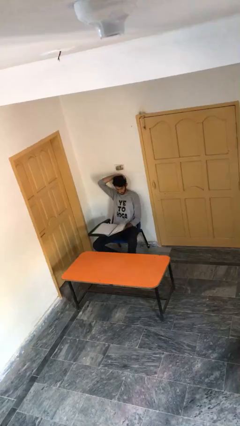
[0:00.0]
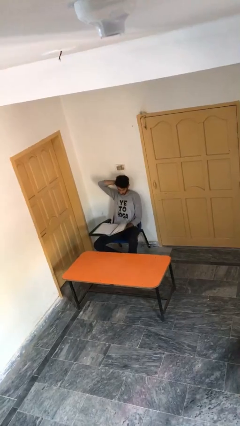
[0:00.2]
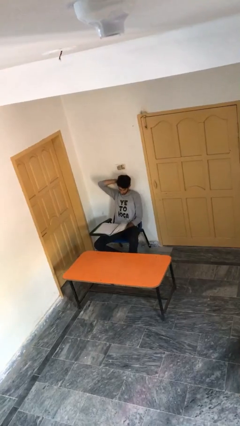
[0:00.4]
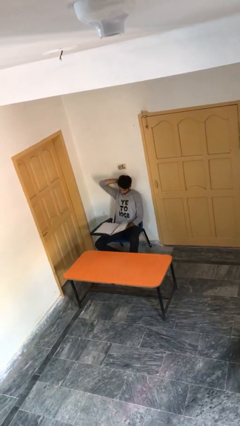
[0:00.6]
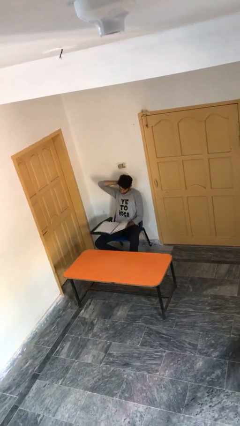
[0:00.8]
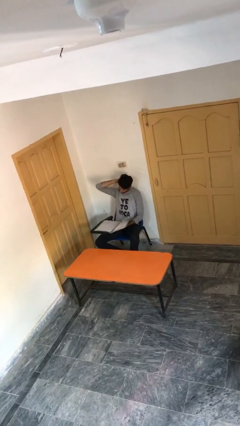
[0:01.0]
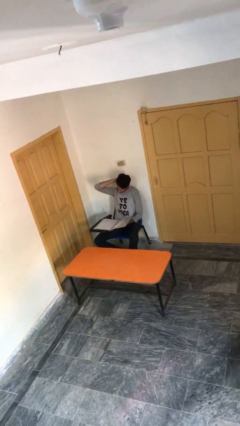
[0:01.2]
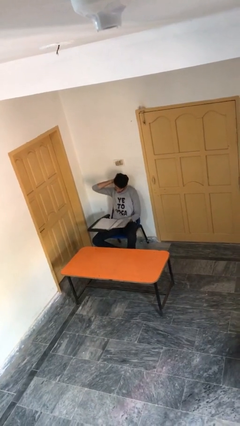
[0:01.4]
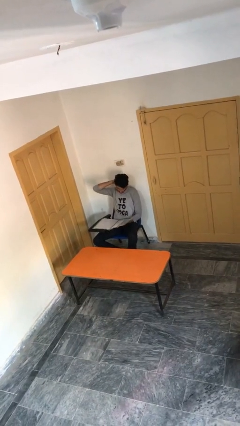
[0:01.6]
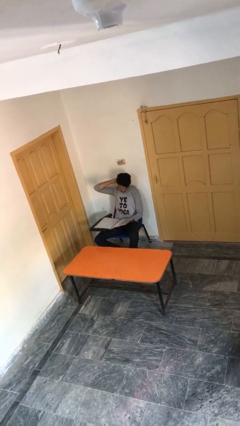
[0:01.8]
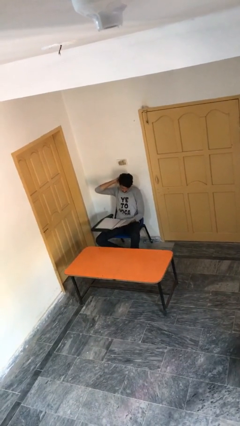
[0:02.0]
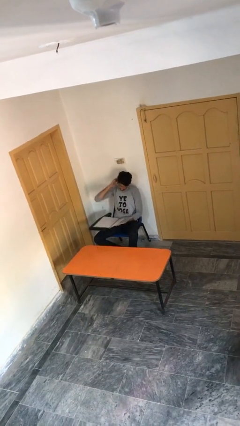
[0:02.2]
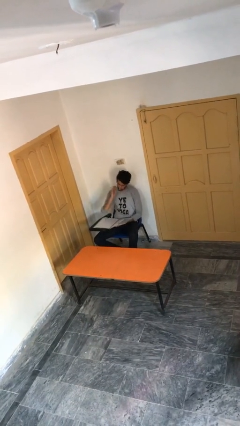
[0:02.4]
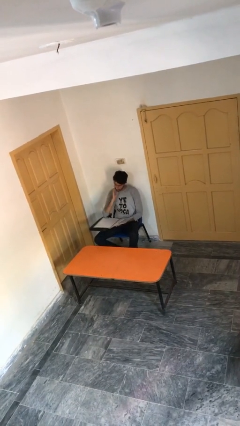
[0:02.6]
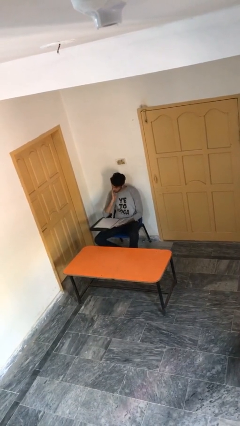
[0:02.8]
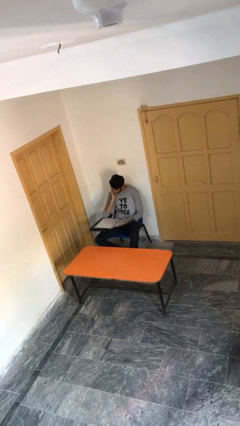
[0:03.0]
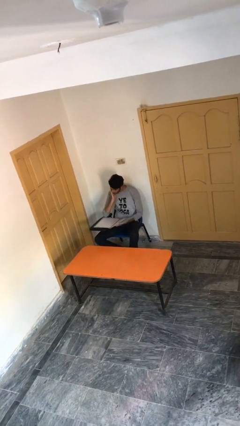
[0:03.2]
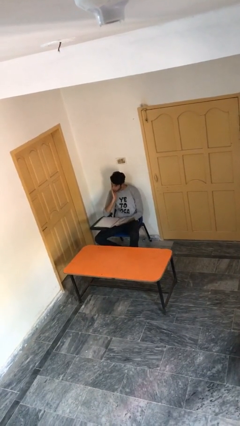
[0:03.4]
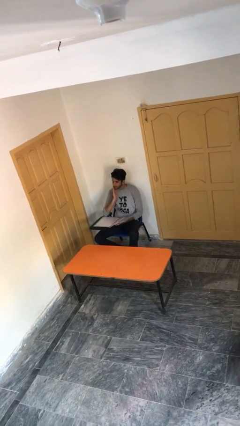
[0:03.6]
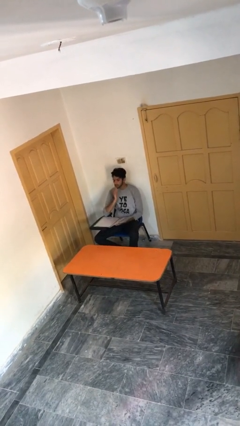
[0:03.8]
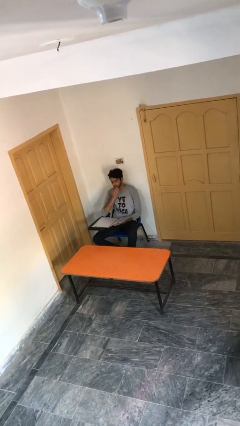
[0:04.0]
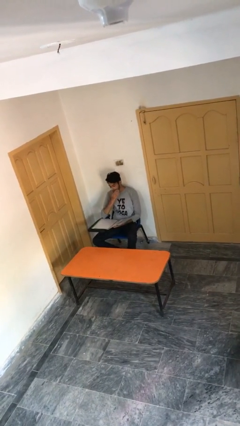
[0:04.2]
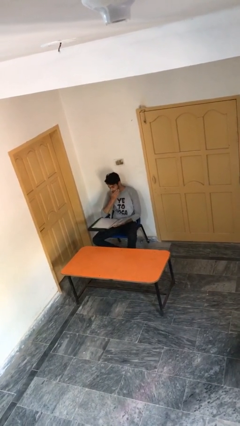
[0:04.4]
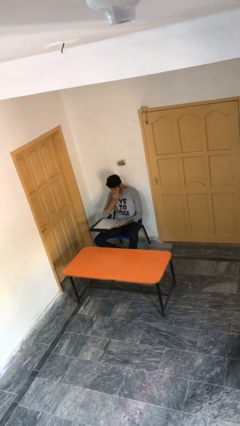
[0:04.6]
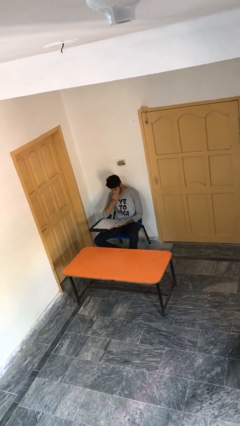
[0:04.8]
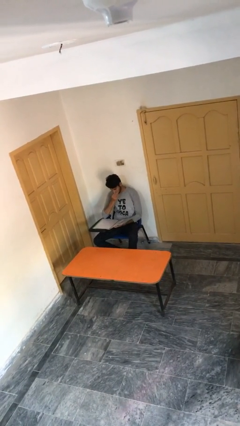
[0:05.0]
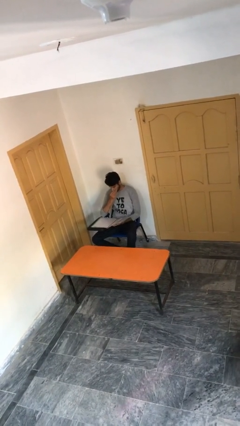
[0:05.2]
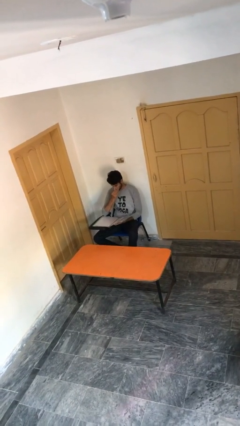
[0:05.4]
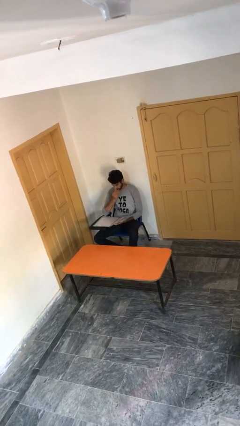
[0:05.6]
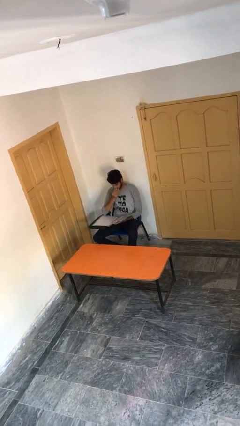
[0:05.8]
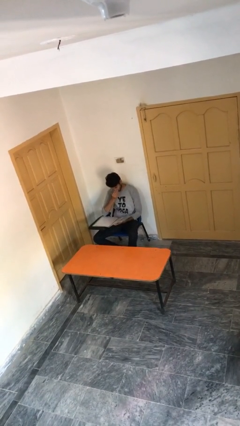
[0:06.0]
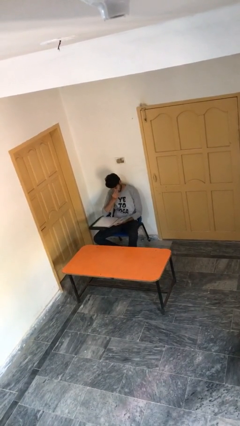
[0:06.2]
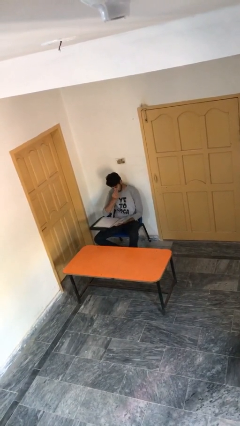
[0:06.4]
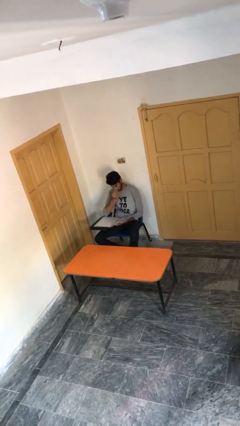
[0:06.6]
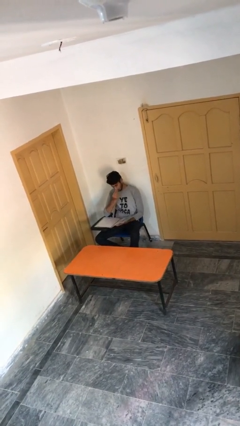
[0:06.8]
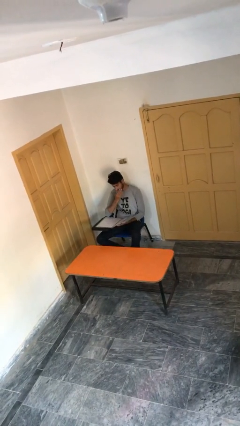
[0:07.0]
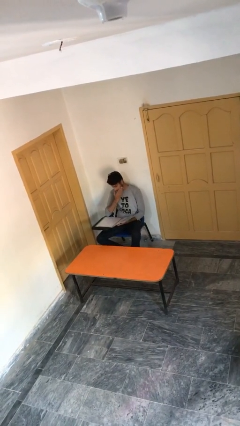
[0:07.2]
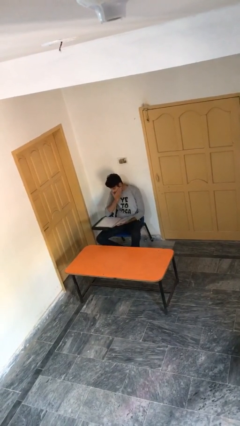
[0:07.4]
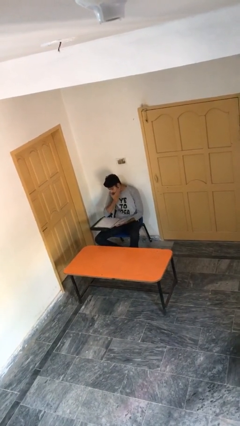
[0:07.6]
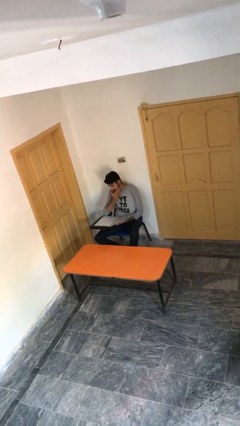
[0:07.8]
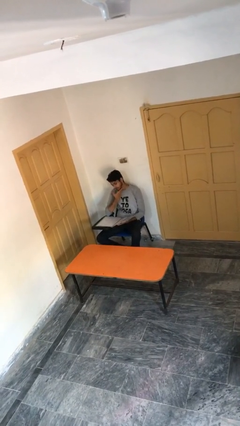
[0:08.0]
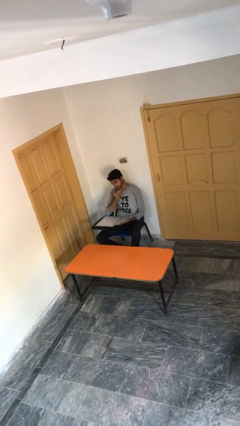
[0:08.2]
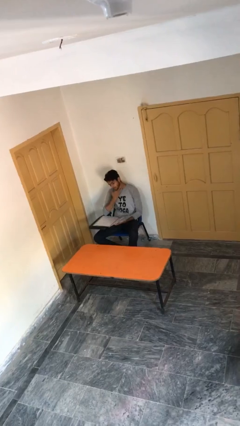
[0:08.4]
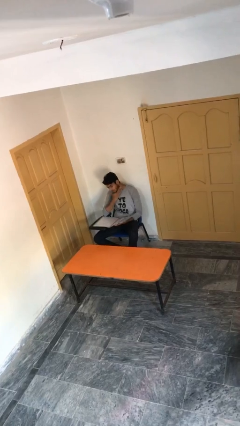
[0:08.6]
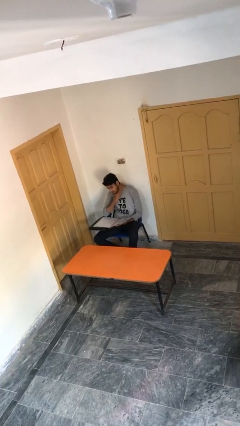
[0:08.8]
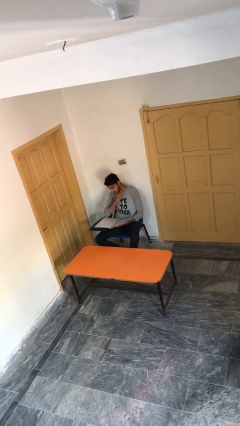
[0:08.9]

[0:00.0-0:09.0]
person reads document

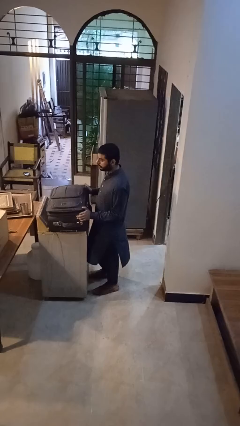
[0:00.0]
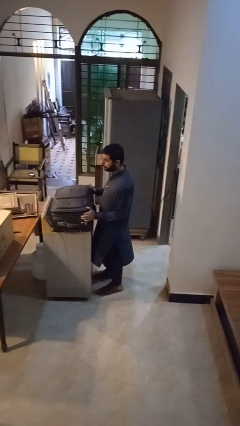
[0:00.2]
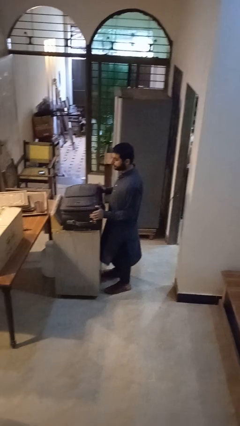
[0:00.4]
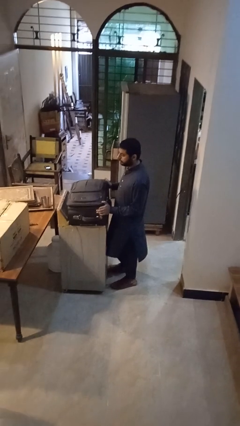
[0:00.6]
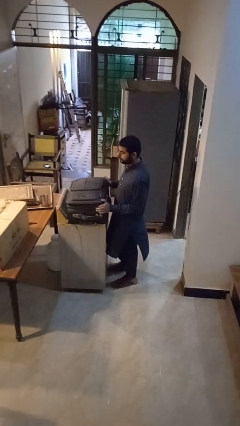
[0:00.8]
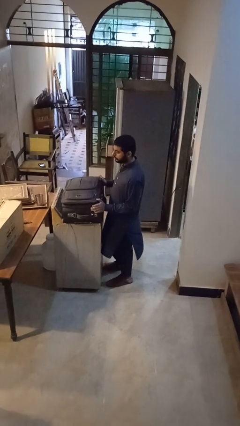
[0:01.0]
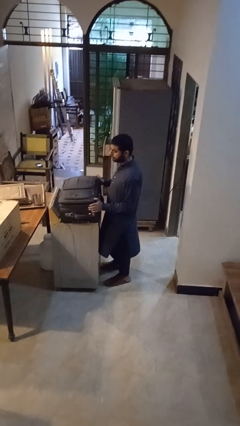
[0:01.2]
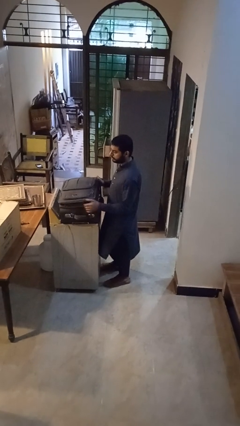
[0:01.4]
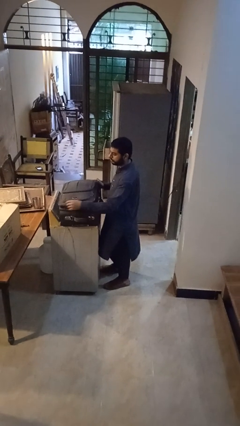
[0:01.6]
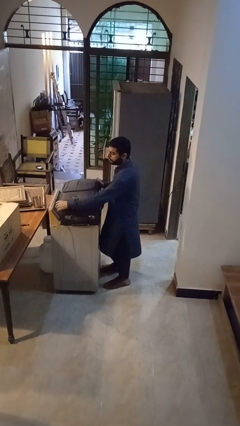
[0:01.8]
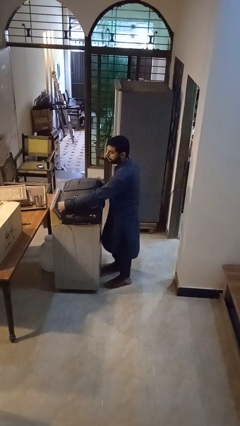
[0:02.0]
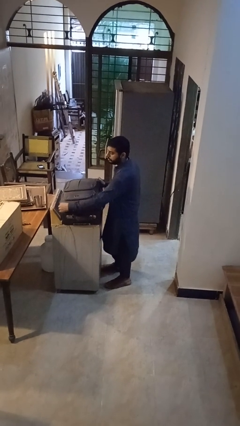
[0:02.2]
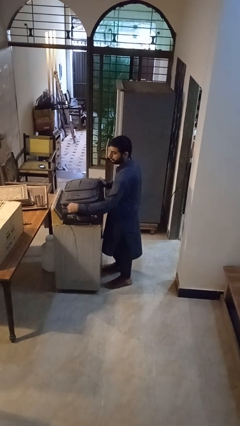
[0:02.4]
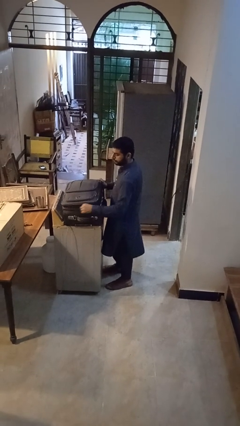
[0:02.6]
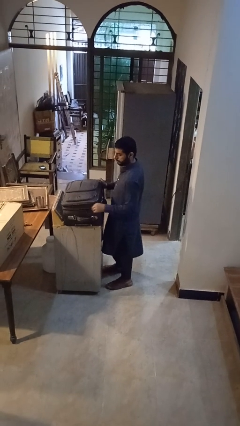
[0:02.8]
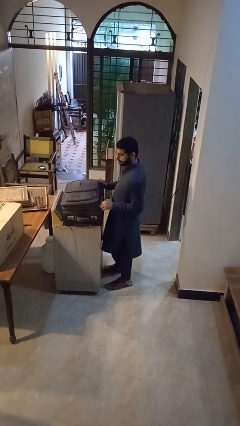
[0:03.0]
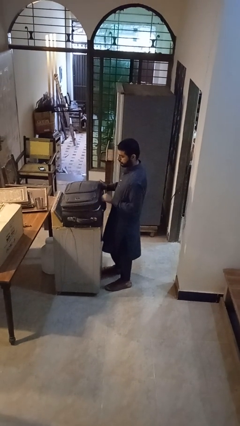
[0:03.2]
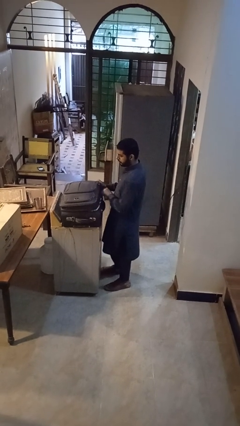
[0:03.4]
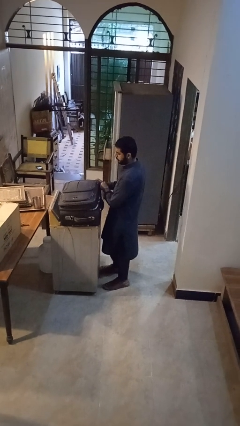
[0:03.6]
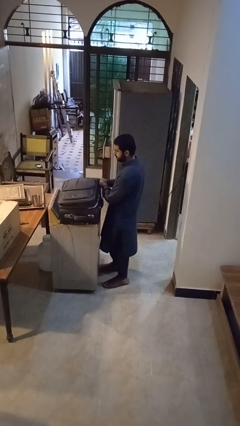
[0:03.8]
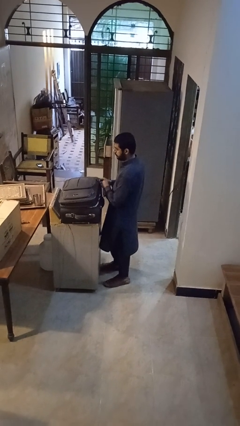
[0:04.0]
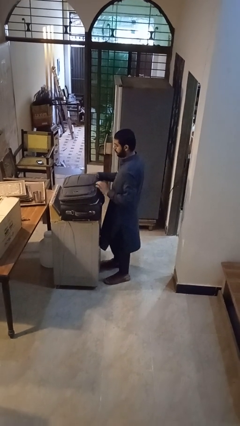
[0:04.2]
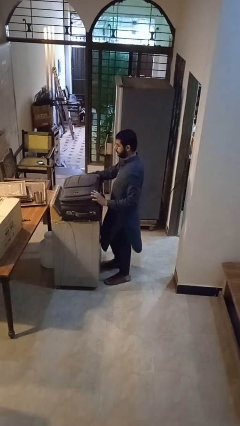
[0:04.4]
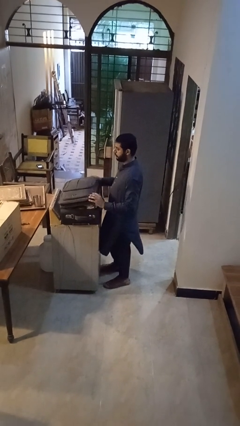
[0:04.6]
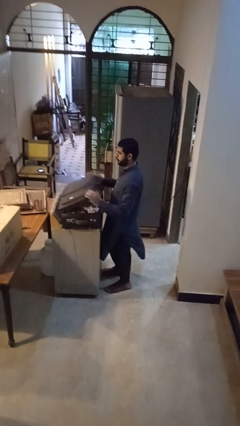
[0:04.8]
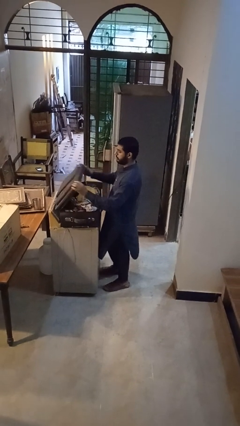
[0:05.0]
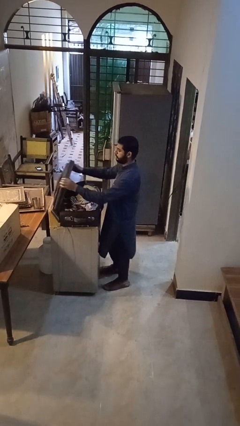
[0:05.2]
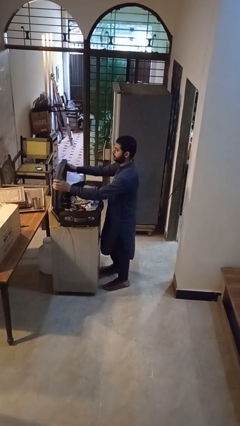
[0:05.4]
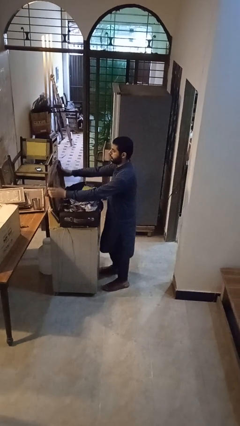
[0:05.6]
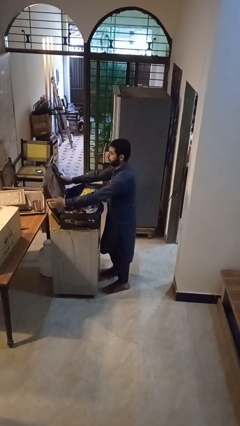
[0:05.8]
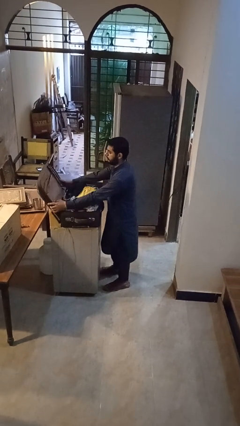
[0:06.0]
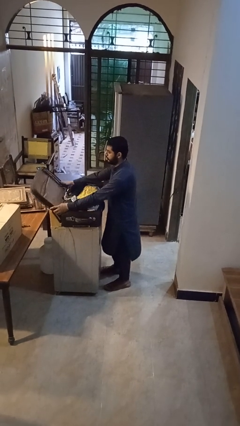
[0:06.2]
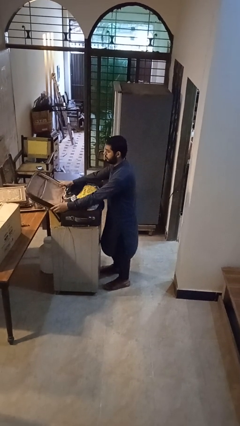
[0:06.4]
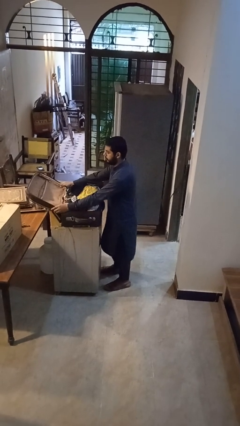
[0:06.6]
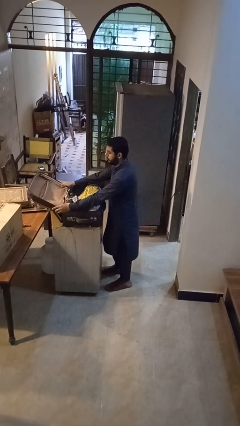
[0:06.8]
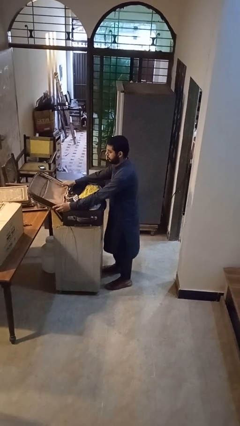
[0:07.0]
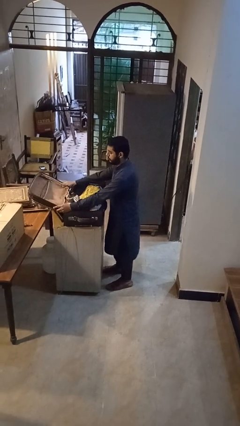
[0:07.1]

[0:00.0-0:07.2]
person opens suitcase

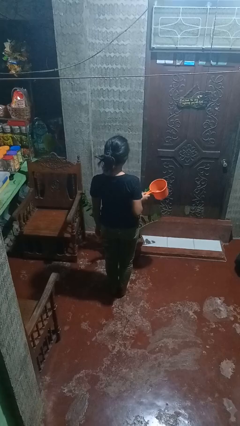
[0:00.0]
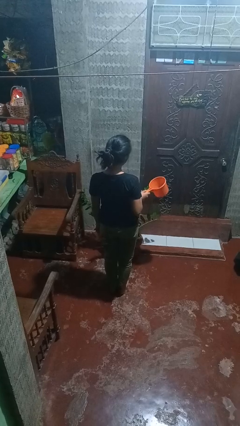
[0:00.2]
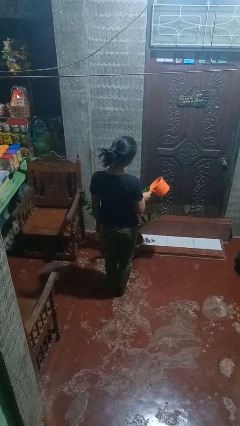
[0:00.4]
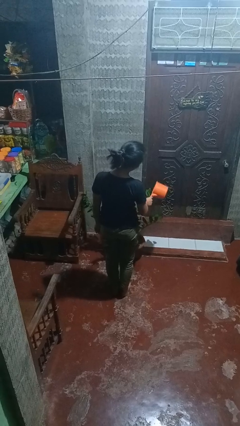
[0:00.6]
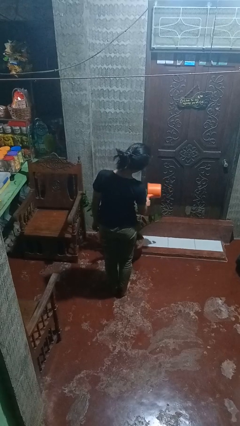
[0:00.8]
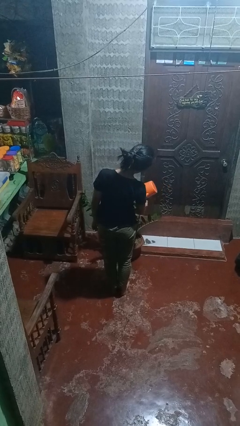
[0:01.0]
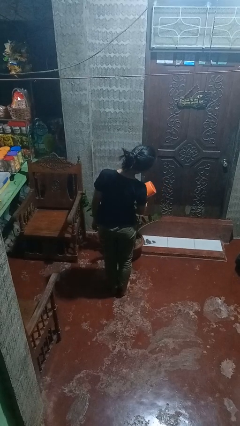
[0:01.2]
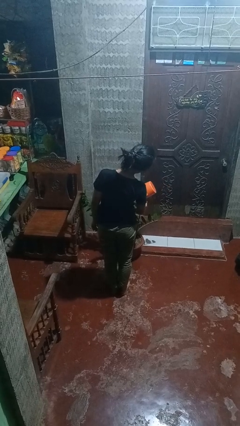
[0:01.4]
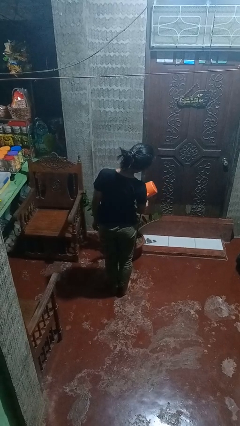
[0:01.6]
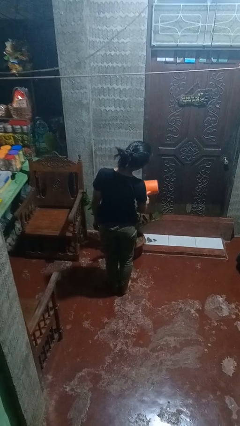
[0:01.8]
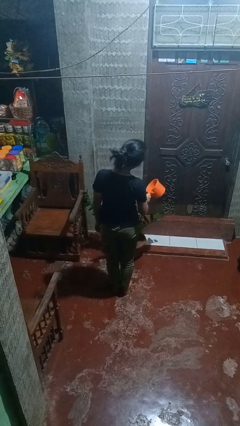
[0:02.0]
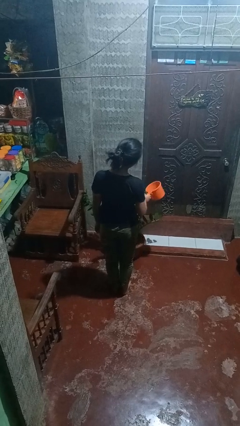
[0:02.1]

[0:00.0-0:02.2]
person waters houseplant
